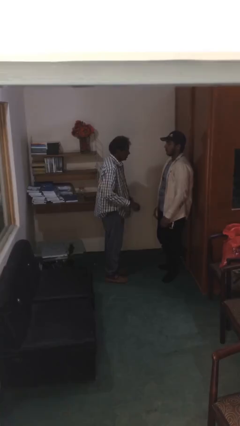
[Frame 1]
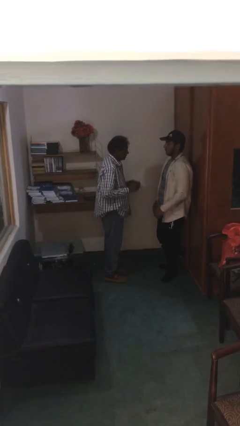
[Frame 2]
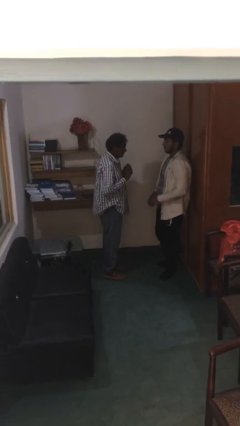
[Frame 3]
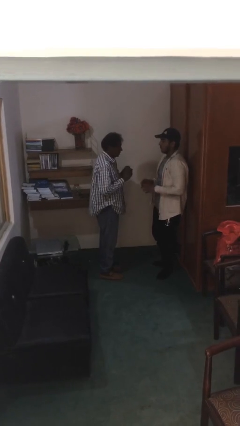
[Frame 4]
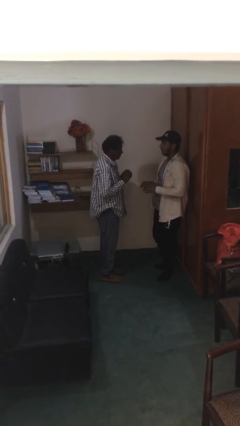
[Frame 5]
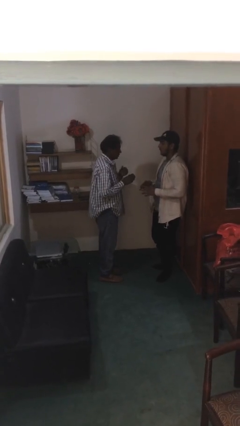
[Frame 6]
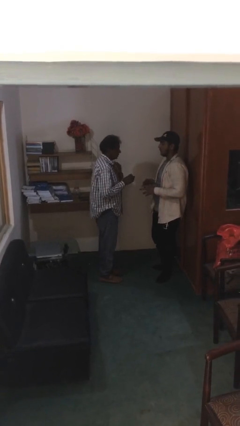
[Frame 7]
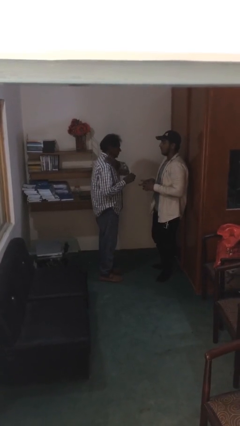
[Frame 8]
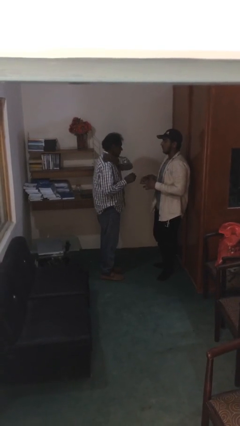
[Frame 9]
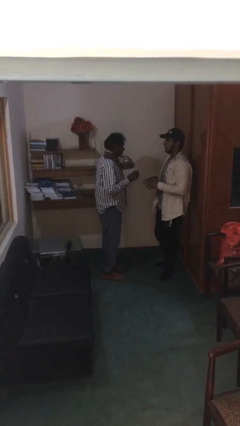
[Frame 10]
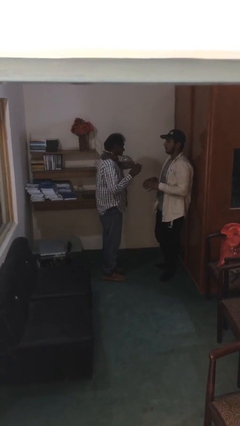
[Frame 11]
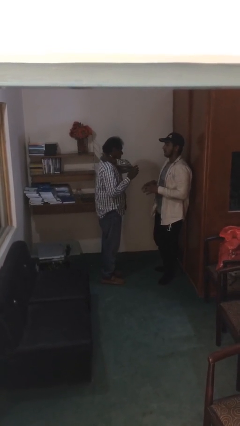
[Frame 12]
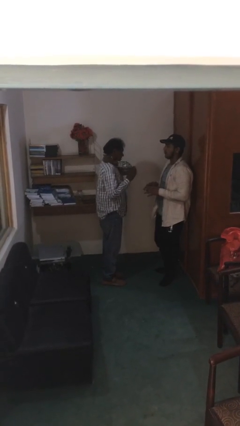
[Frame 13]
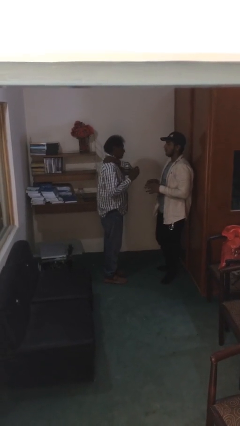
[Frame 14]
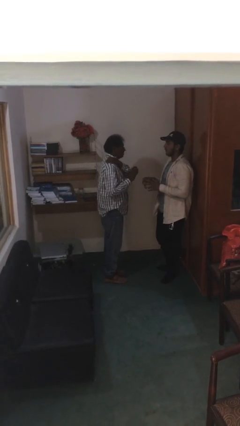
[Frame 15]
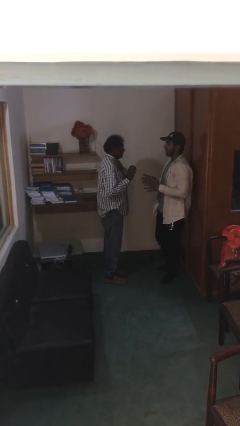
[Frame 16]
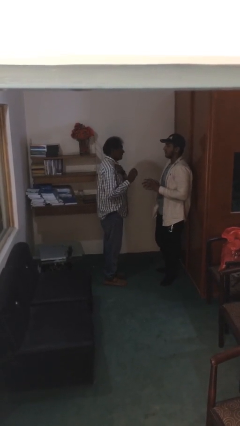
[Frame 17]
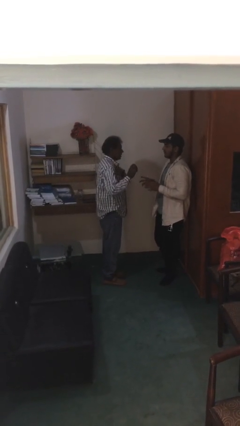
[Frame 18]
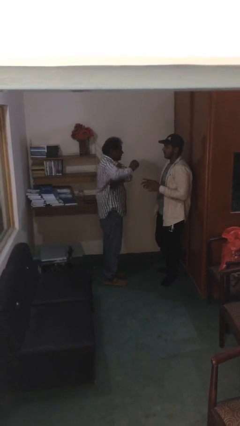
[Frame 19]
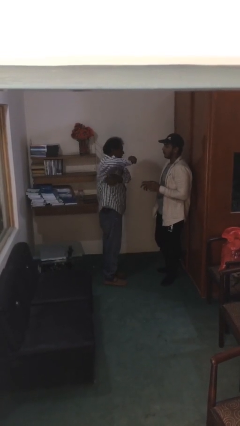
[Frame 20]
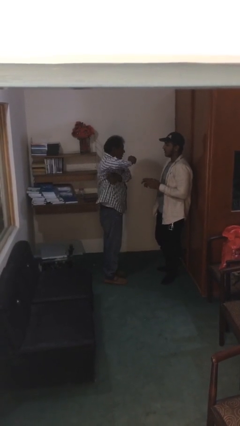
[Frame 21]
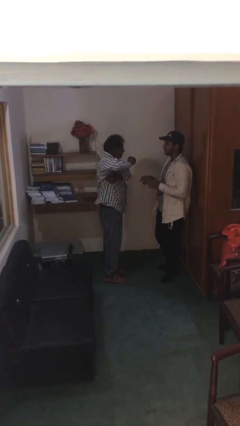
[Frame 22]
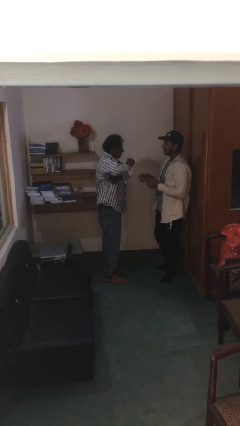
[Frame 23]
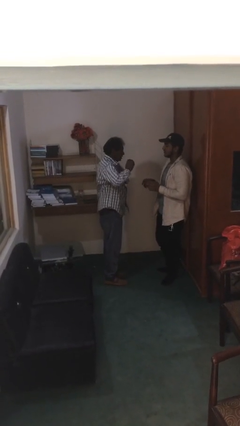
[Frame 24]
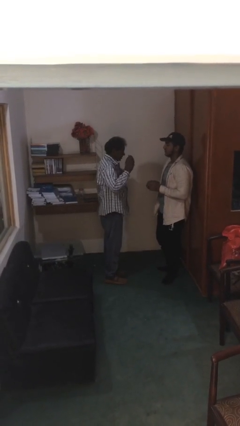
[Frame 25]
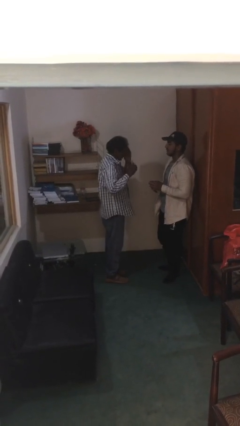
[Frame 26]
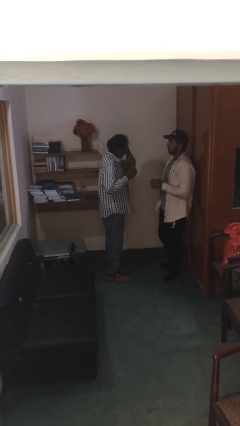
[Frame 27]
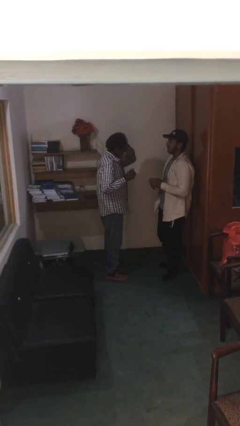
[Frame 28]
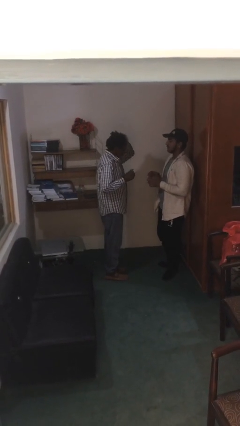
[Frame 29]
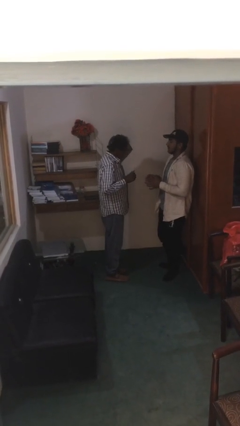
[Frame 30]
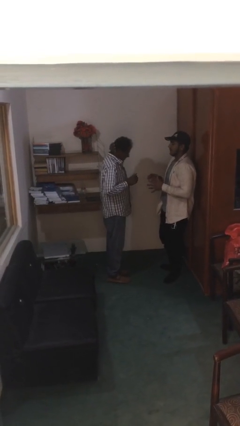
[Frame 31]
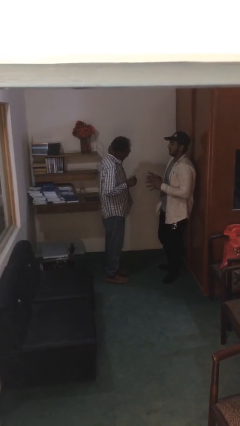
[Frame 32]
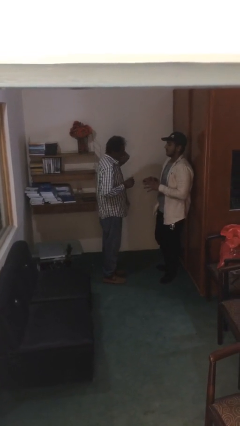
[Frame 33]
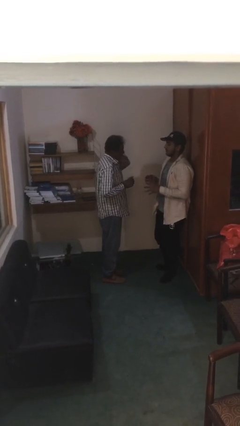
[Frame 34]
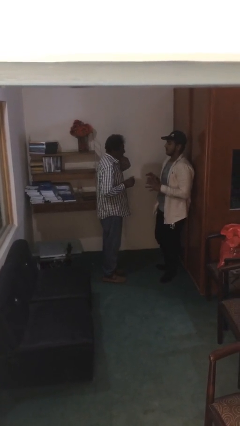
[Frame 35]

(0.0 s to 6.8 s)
person talks to person

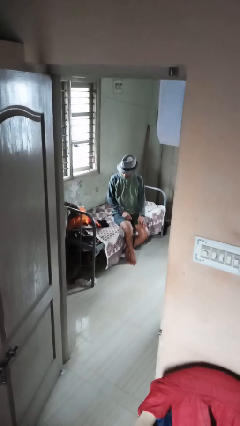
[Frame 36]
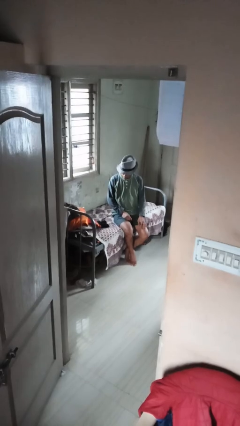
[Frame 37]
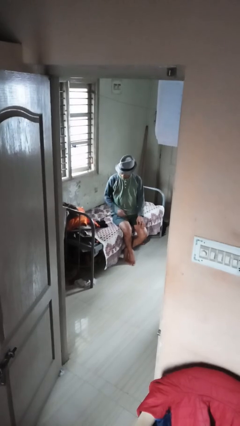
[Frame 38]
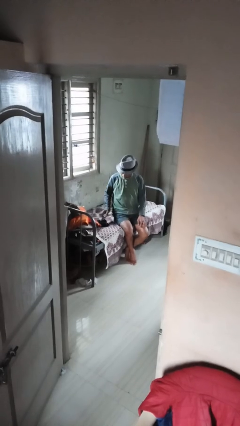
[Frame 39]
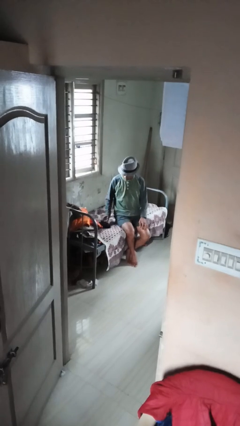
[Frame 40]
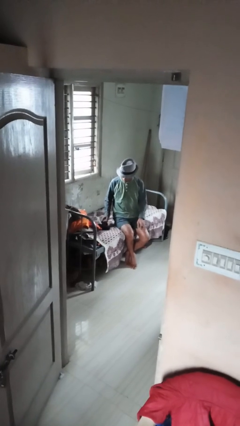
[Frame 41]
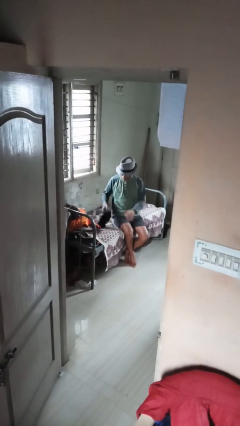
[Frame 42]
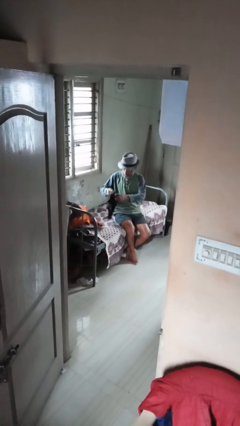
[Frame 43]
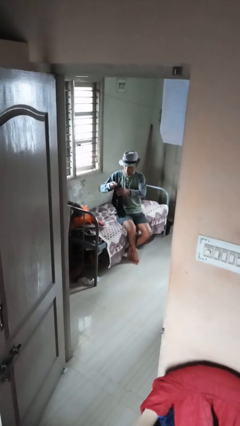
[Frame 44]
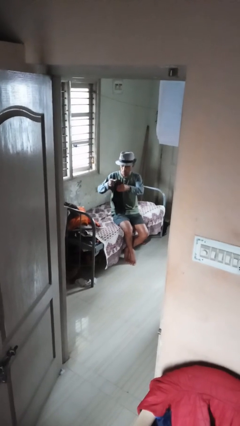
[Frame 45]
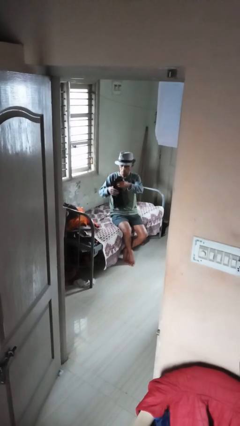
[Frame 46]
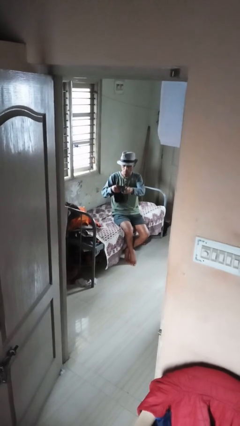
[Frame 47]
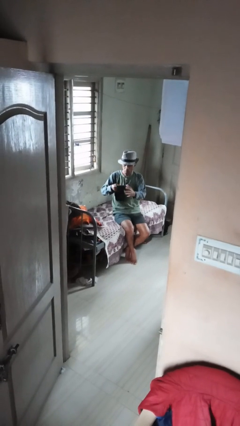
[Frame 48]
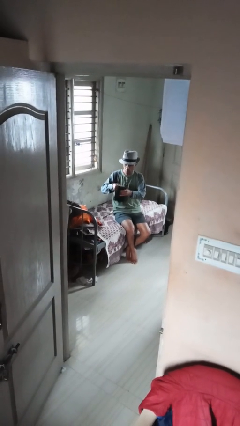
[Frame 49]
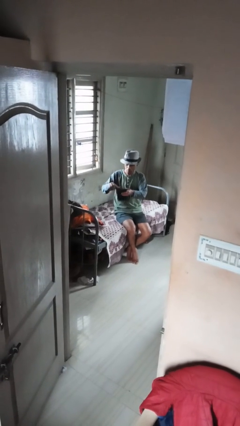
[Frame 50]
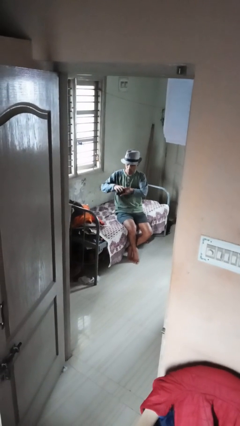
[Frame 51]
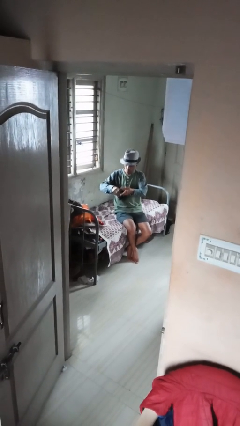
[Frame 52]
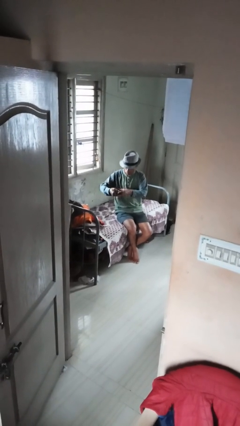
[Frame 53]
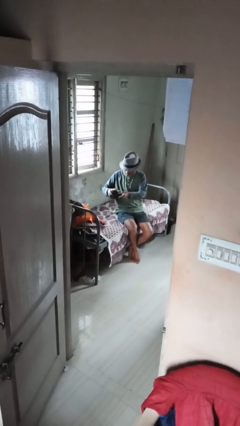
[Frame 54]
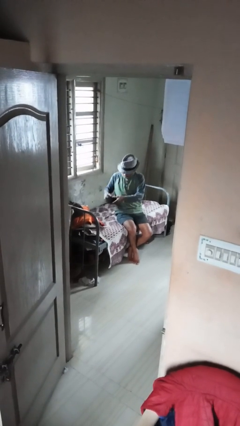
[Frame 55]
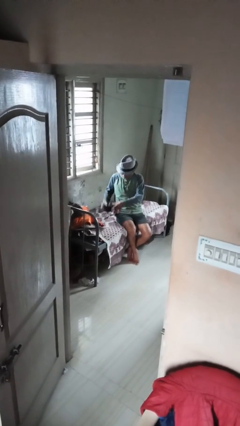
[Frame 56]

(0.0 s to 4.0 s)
person folds socks

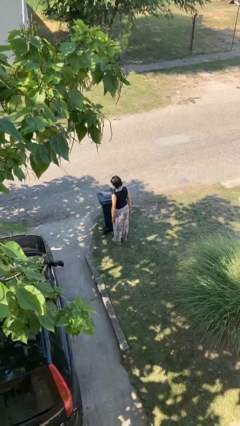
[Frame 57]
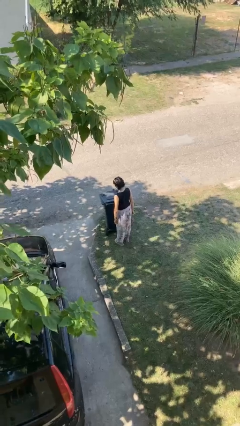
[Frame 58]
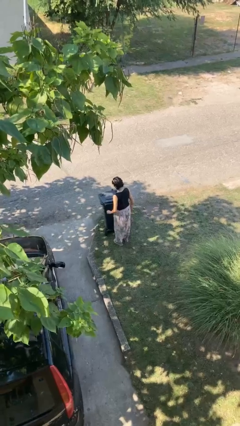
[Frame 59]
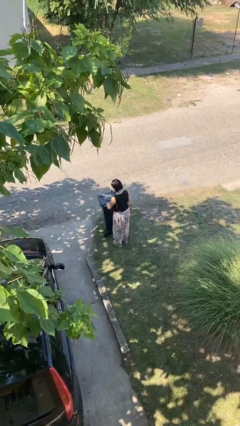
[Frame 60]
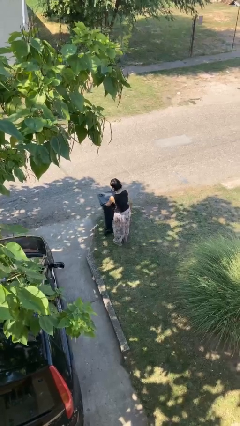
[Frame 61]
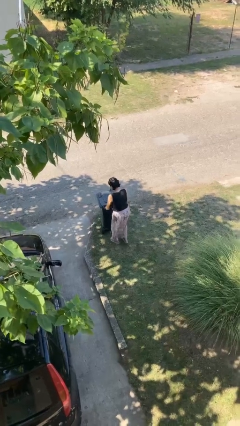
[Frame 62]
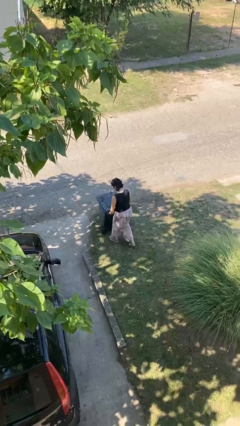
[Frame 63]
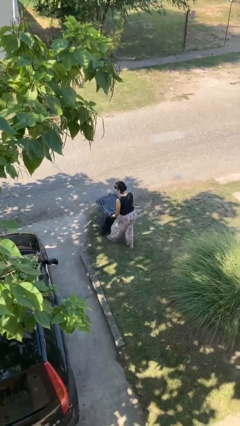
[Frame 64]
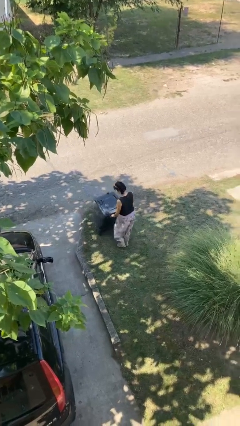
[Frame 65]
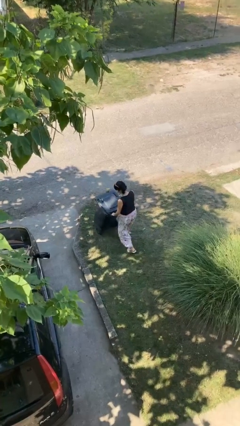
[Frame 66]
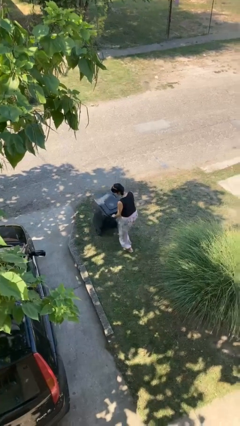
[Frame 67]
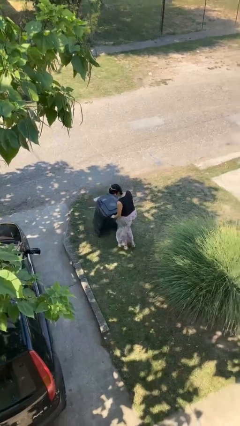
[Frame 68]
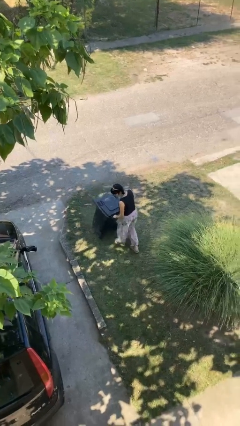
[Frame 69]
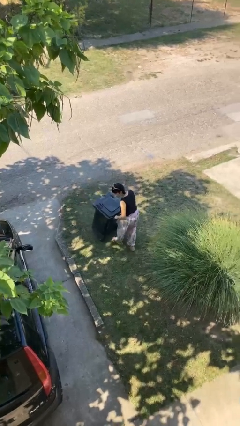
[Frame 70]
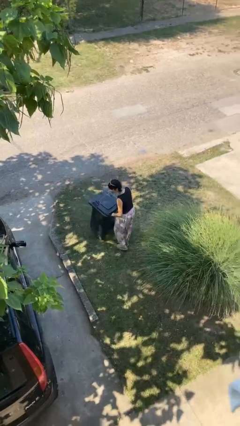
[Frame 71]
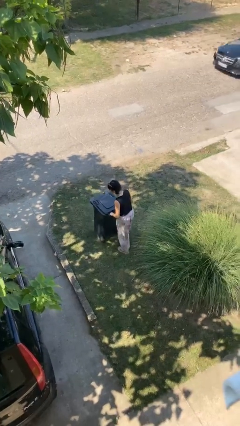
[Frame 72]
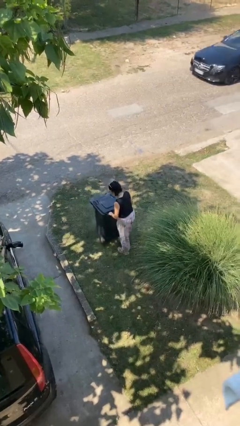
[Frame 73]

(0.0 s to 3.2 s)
person pulls wheeled trashcan

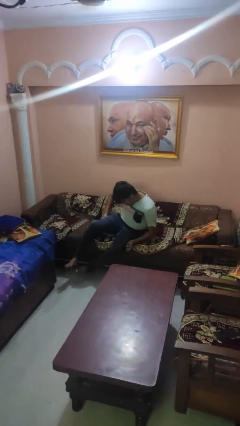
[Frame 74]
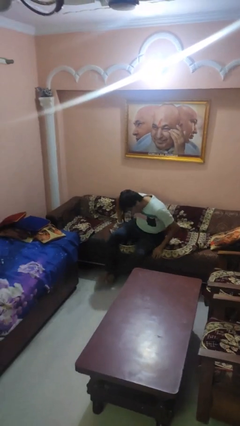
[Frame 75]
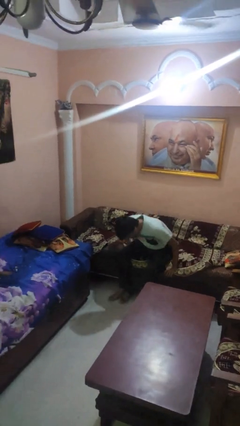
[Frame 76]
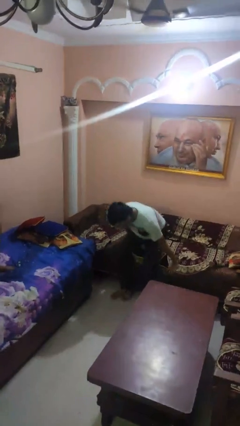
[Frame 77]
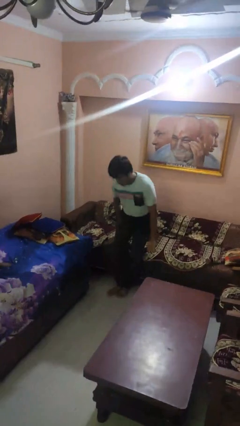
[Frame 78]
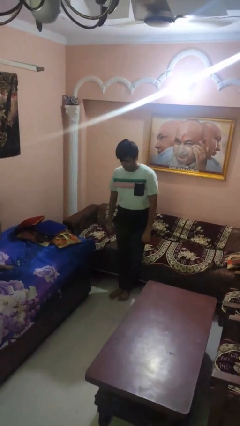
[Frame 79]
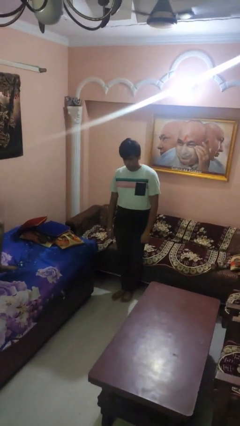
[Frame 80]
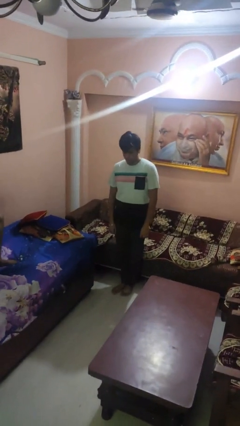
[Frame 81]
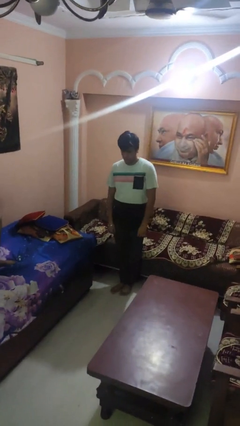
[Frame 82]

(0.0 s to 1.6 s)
person stands up

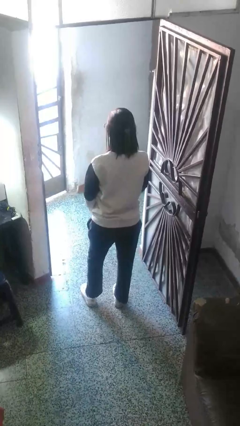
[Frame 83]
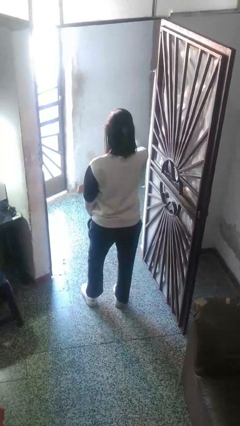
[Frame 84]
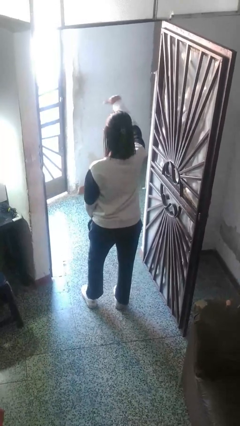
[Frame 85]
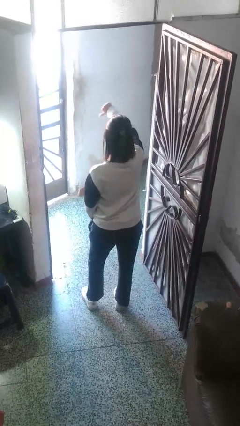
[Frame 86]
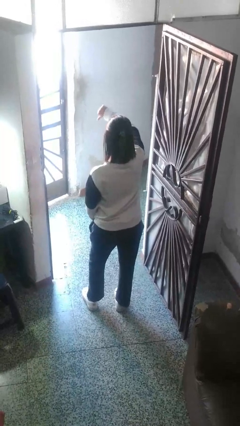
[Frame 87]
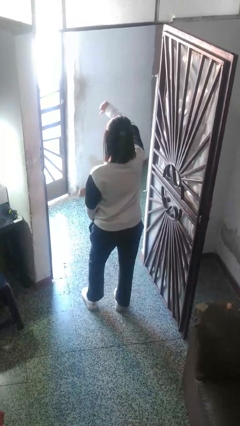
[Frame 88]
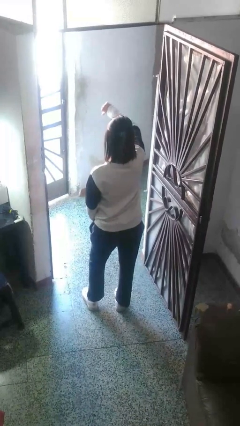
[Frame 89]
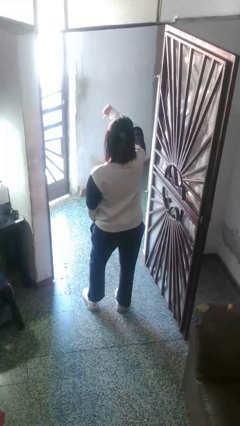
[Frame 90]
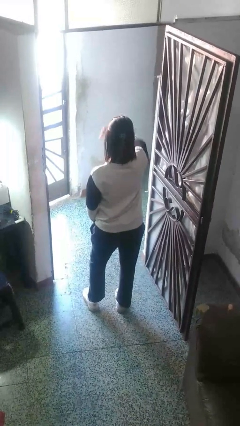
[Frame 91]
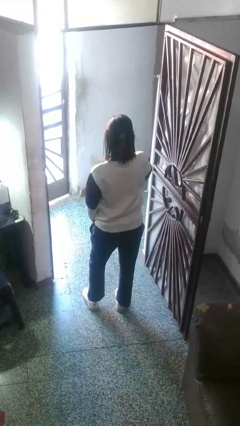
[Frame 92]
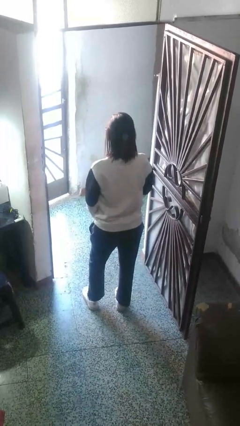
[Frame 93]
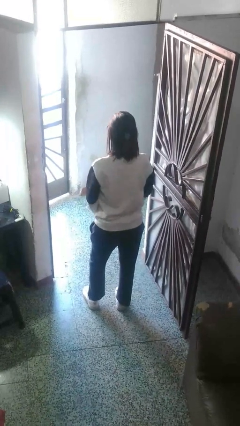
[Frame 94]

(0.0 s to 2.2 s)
person gestures thumbs down
